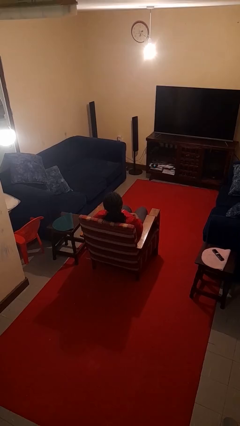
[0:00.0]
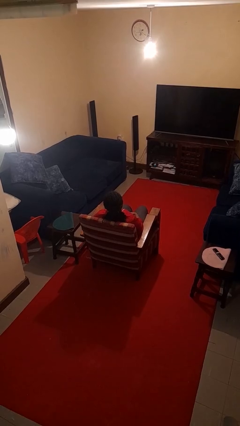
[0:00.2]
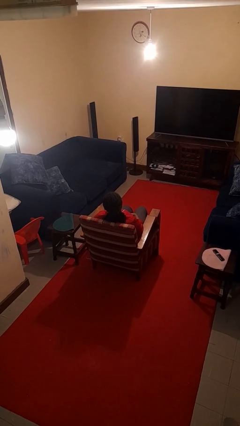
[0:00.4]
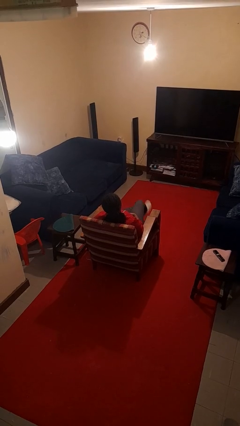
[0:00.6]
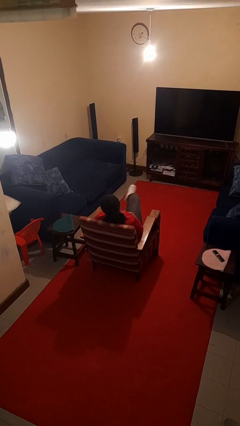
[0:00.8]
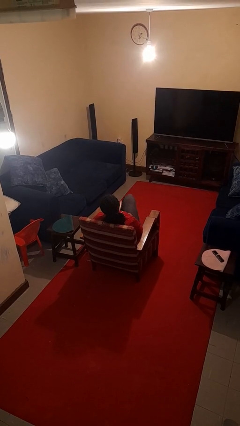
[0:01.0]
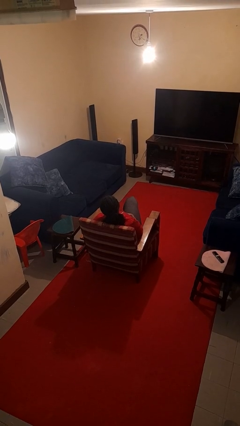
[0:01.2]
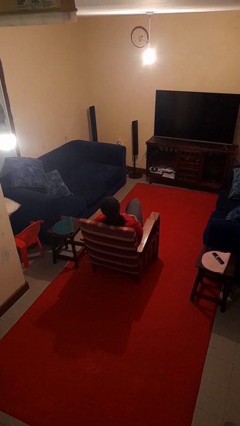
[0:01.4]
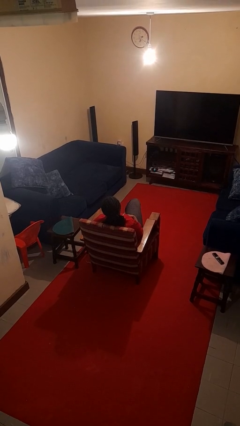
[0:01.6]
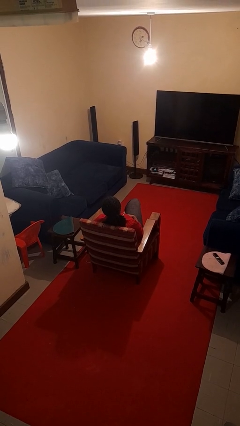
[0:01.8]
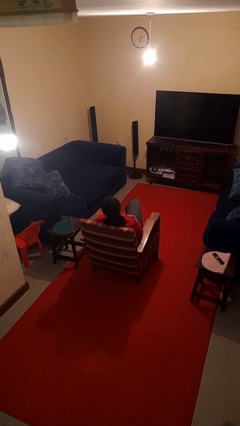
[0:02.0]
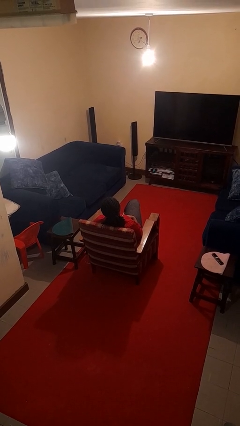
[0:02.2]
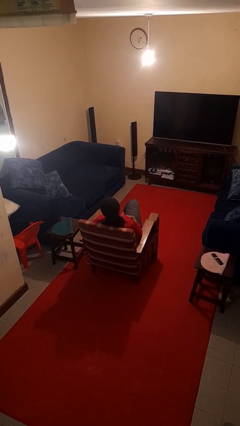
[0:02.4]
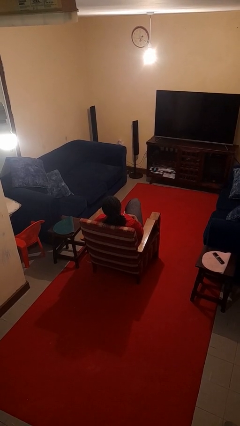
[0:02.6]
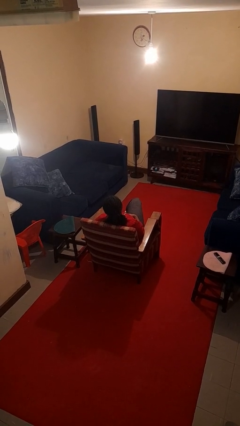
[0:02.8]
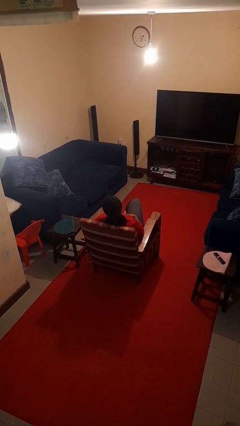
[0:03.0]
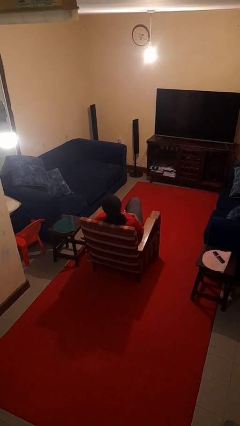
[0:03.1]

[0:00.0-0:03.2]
person crosses legs

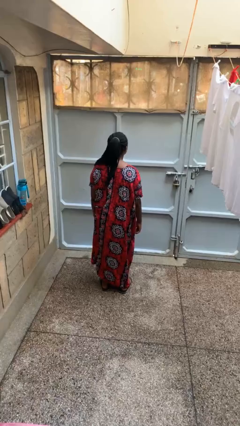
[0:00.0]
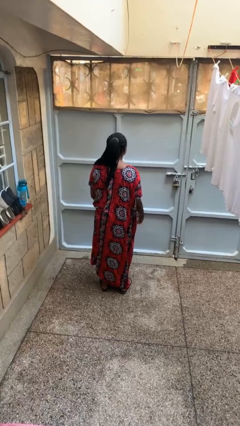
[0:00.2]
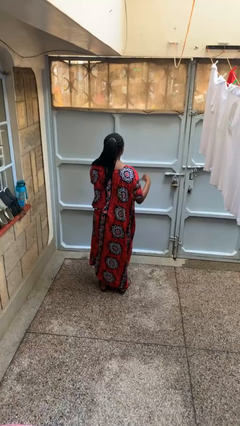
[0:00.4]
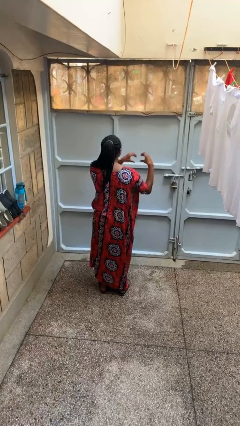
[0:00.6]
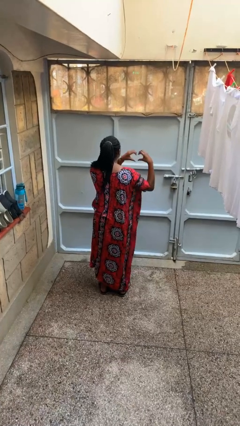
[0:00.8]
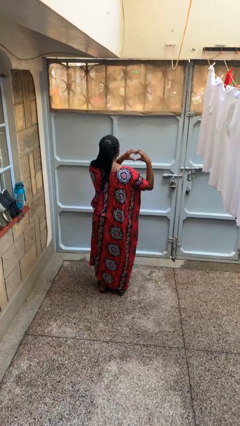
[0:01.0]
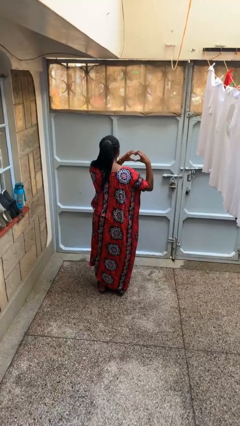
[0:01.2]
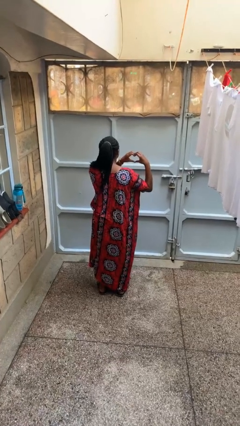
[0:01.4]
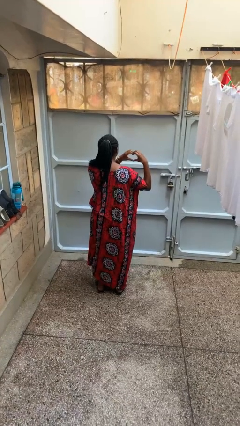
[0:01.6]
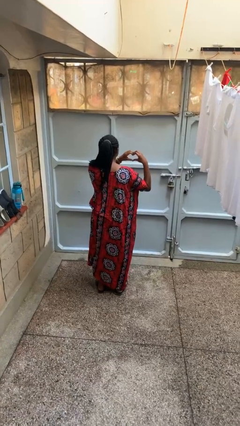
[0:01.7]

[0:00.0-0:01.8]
person gestures heart

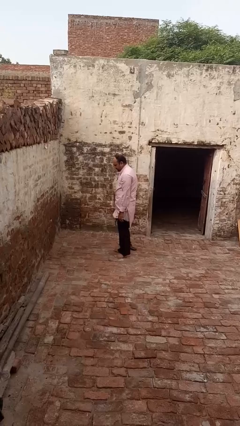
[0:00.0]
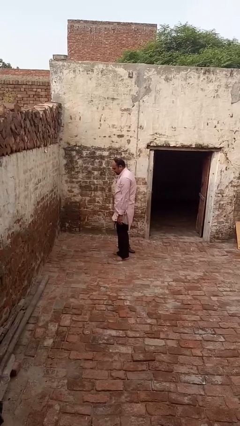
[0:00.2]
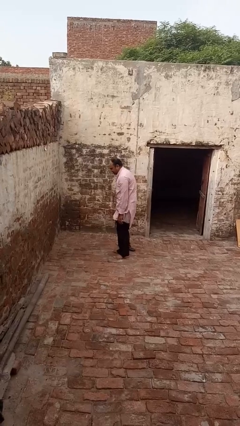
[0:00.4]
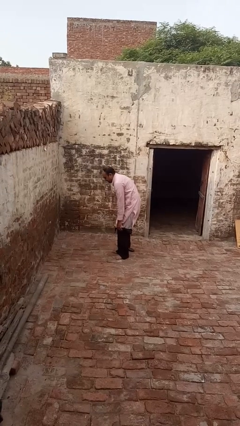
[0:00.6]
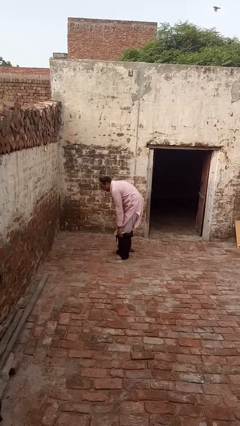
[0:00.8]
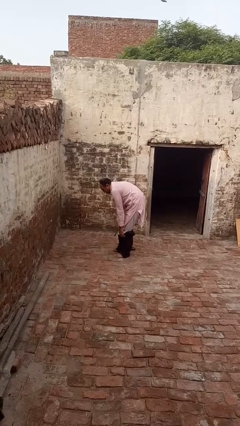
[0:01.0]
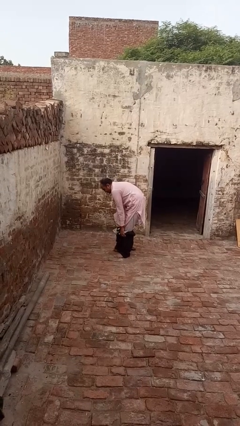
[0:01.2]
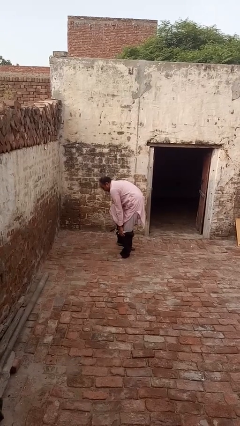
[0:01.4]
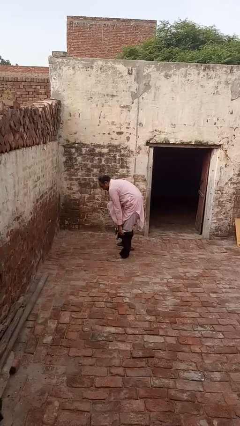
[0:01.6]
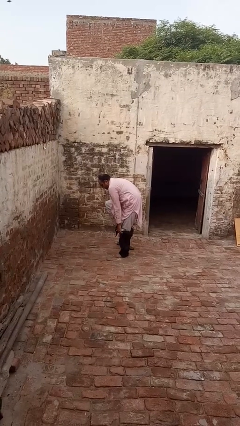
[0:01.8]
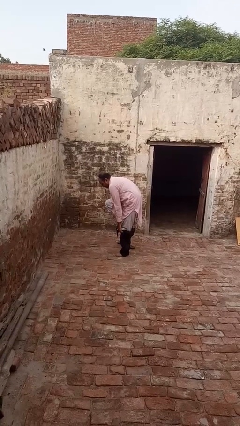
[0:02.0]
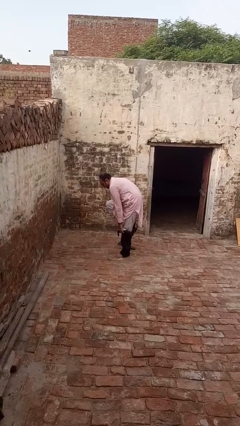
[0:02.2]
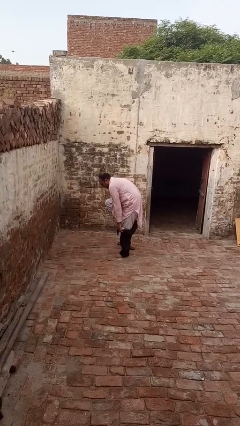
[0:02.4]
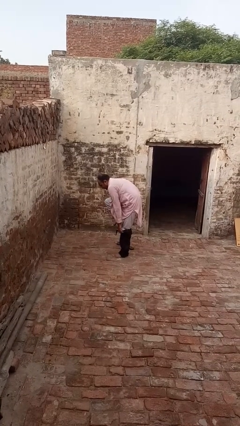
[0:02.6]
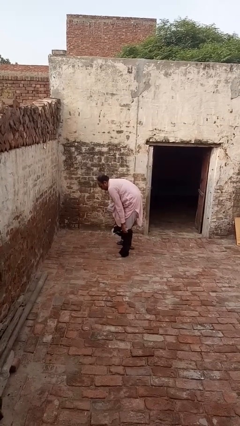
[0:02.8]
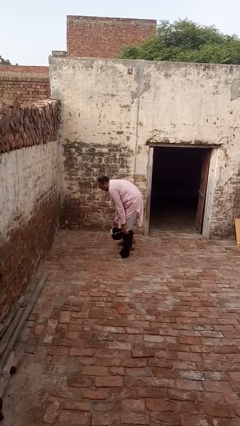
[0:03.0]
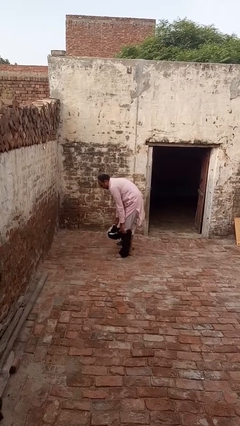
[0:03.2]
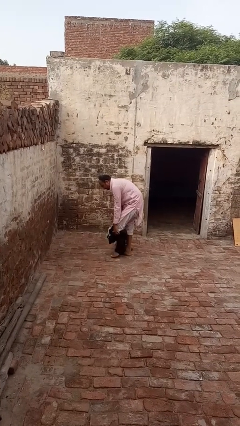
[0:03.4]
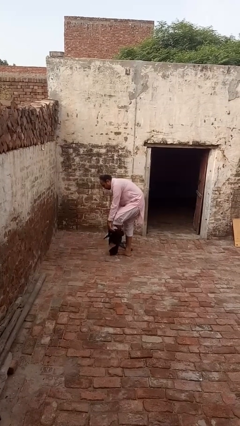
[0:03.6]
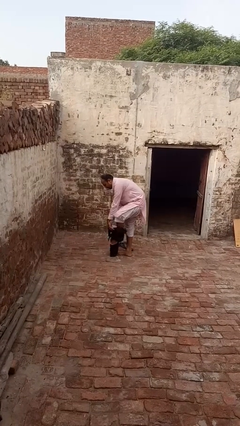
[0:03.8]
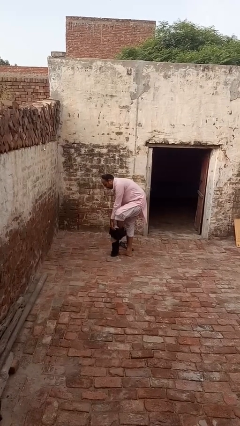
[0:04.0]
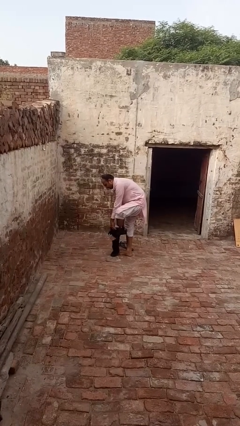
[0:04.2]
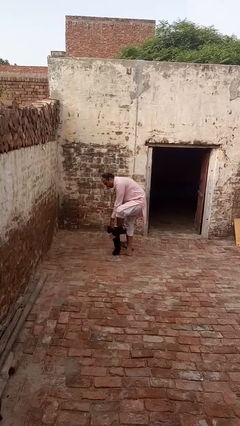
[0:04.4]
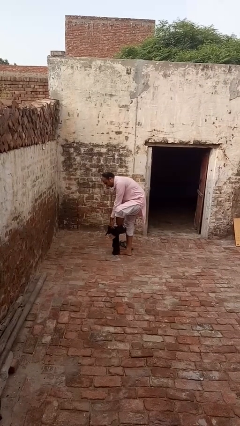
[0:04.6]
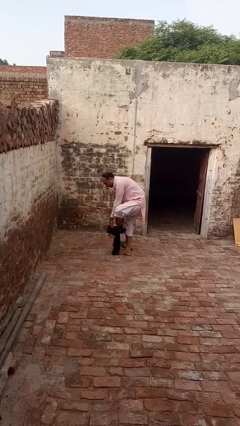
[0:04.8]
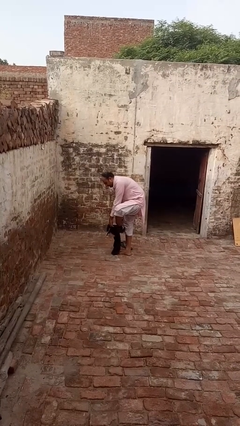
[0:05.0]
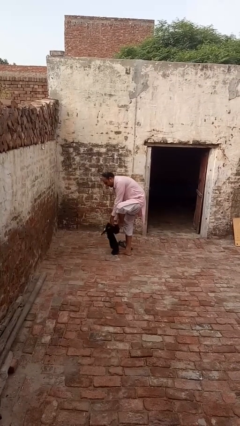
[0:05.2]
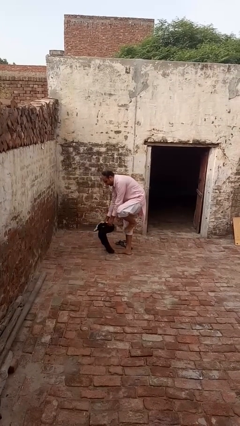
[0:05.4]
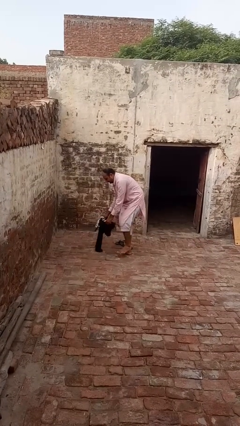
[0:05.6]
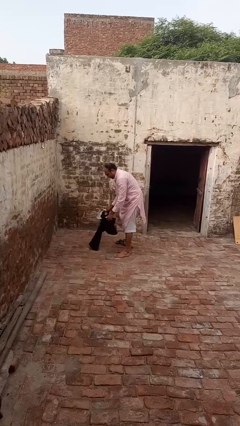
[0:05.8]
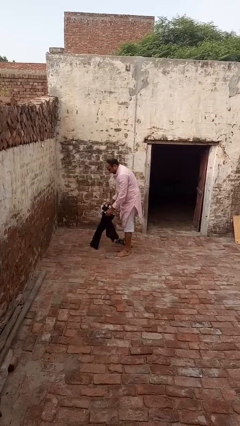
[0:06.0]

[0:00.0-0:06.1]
person takes off pants

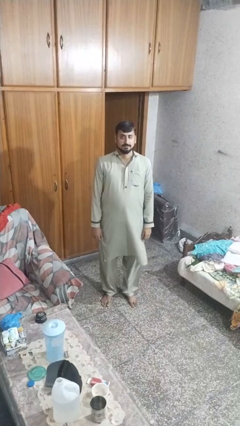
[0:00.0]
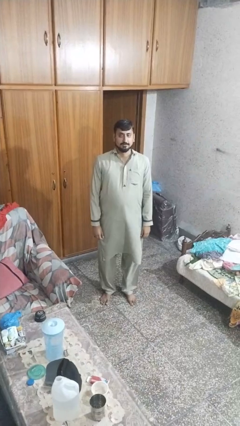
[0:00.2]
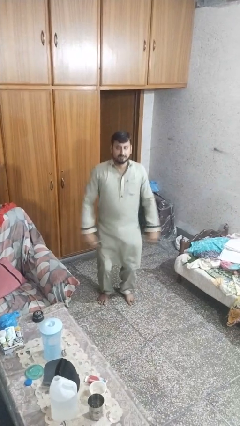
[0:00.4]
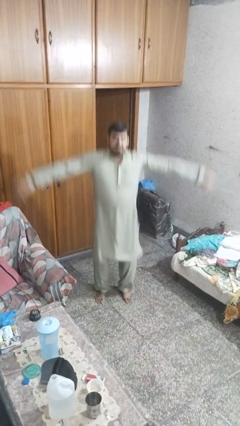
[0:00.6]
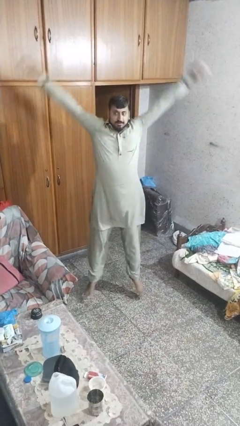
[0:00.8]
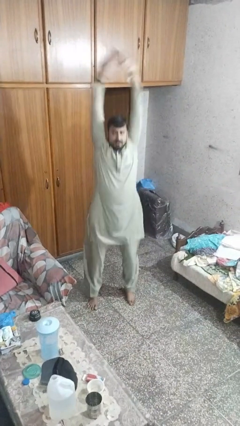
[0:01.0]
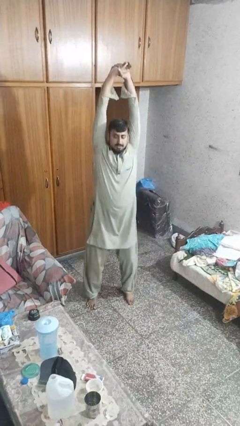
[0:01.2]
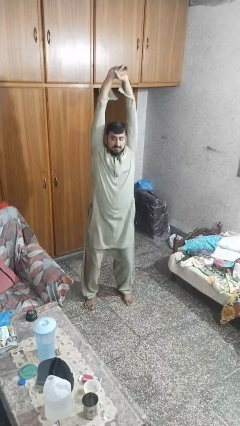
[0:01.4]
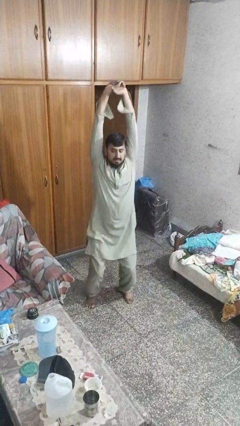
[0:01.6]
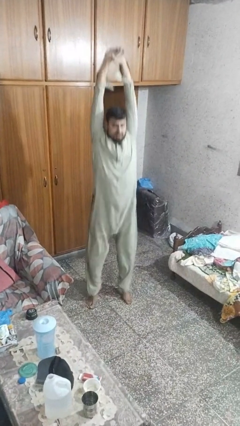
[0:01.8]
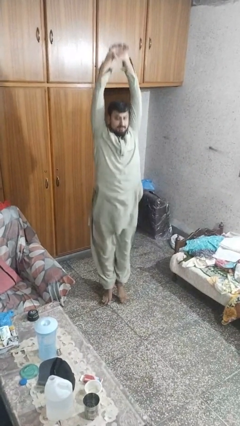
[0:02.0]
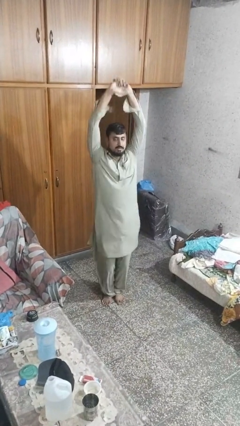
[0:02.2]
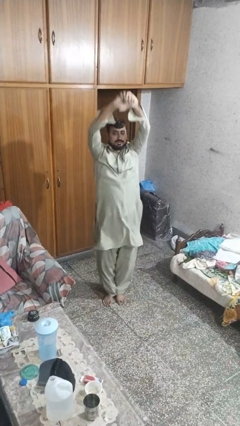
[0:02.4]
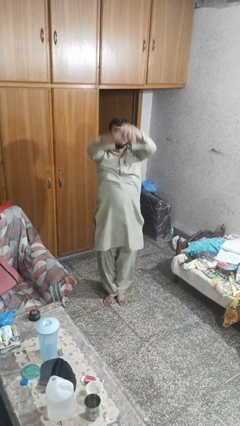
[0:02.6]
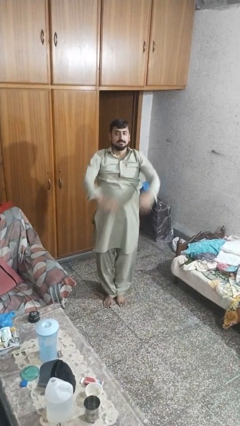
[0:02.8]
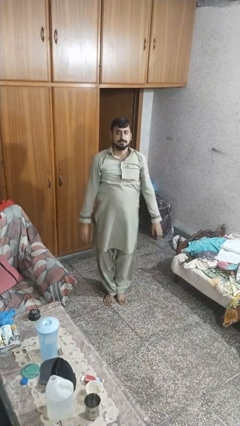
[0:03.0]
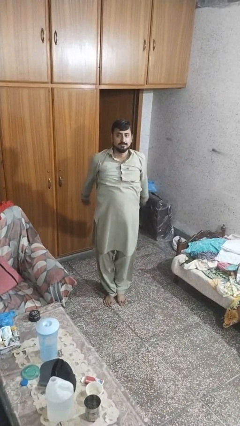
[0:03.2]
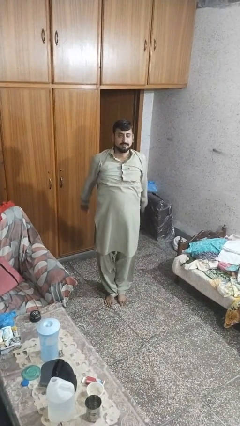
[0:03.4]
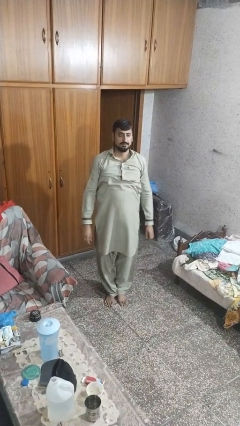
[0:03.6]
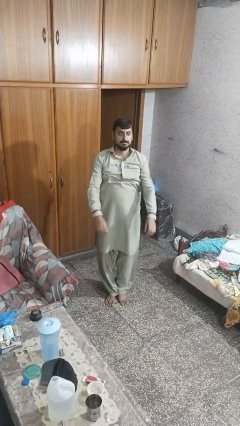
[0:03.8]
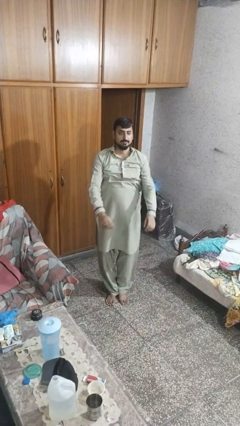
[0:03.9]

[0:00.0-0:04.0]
person exercises with jumping jacks

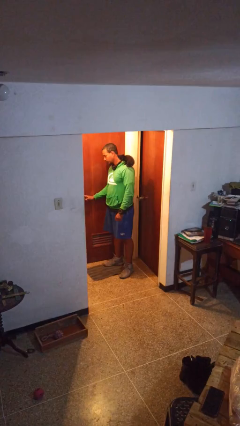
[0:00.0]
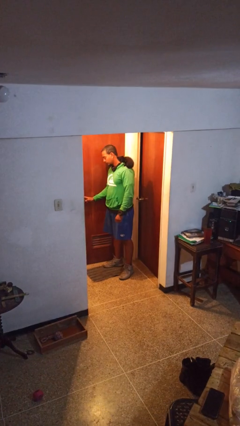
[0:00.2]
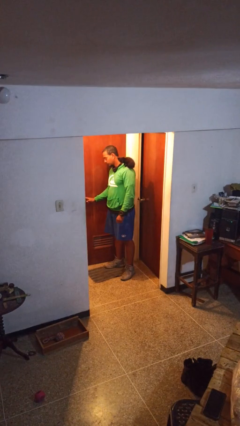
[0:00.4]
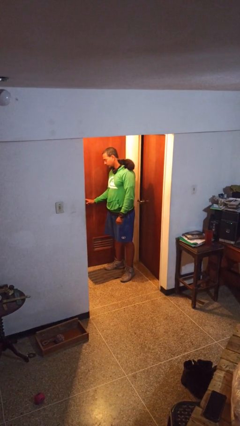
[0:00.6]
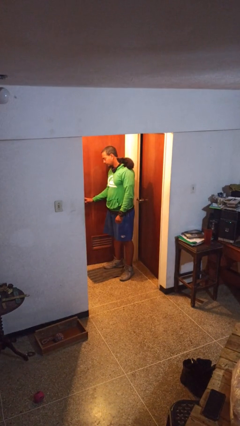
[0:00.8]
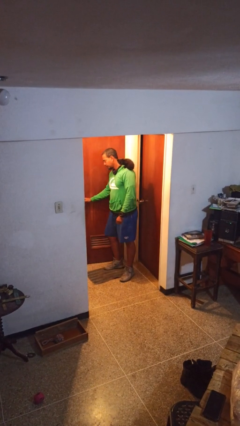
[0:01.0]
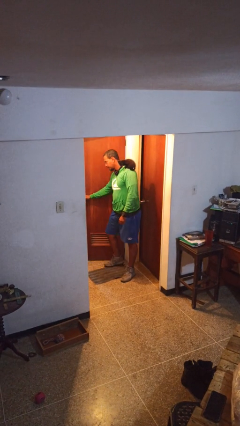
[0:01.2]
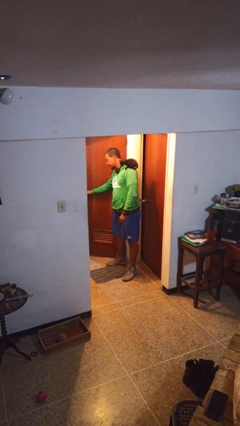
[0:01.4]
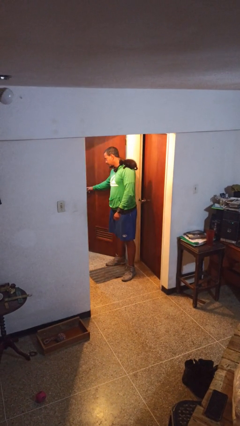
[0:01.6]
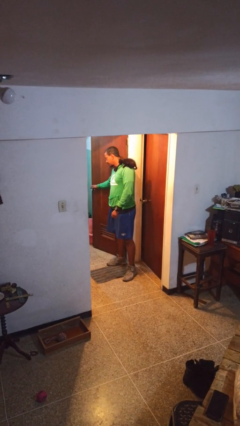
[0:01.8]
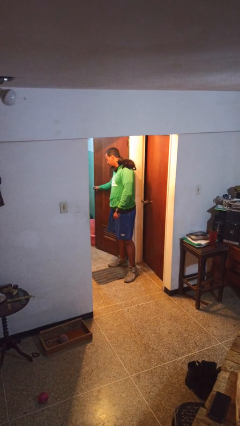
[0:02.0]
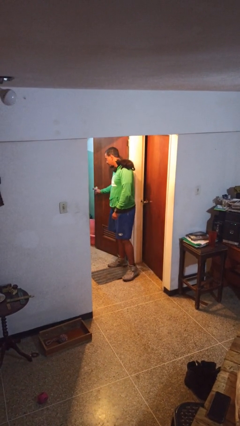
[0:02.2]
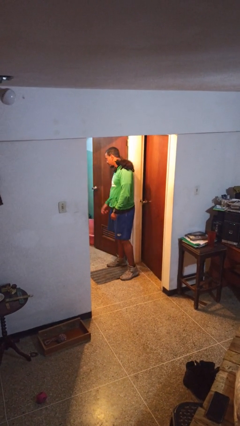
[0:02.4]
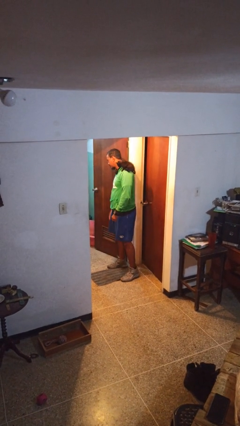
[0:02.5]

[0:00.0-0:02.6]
person opens facility door

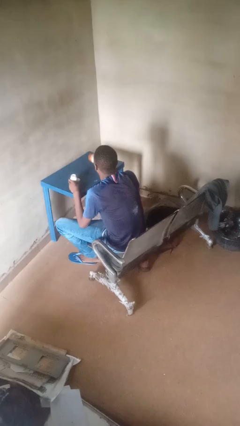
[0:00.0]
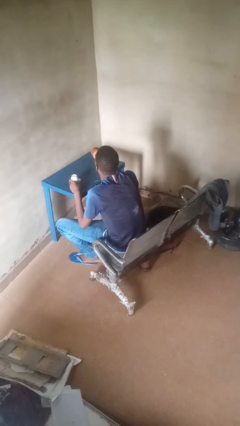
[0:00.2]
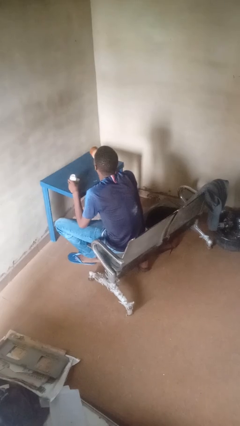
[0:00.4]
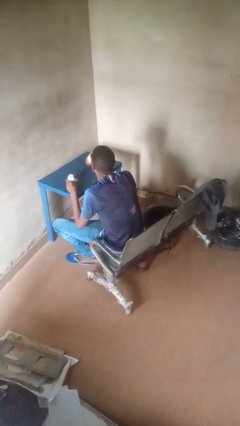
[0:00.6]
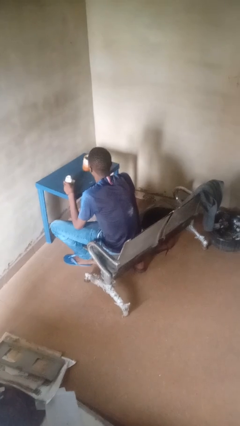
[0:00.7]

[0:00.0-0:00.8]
person drinks from cup
